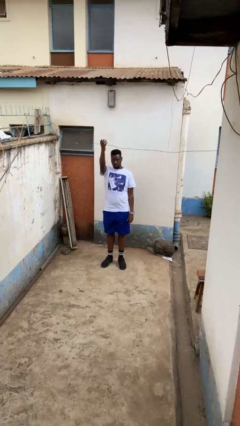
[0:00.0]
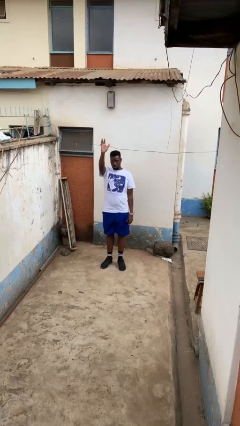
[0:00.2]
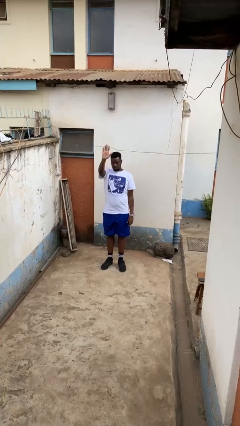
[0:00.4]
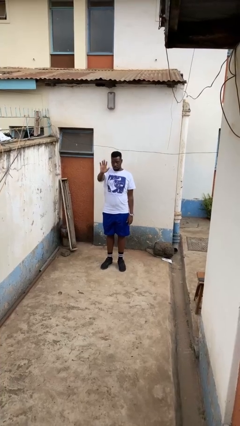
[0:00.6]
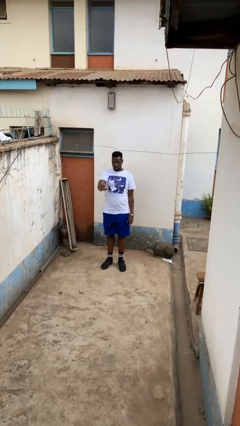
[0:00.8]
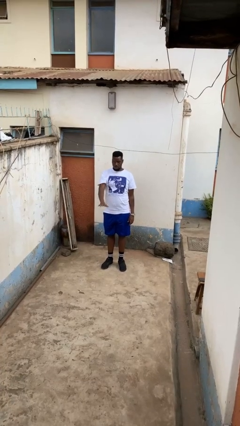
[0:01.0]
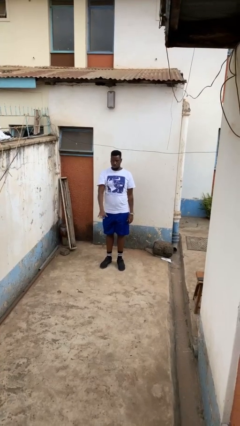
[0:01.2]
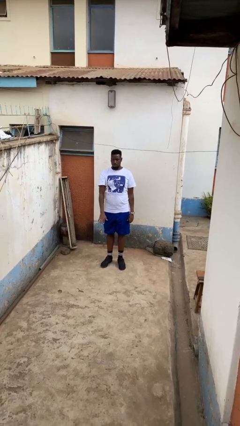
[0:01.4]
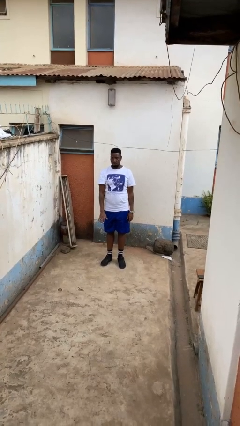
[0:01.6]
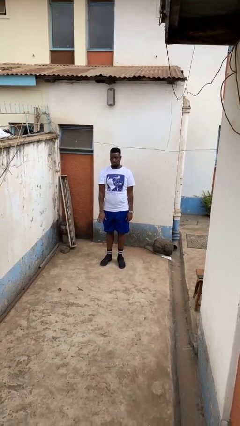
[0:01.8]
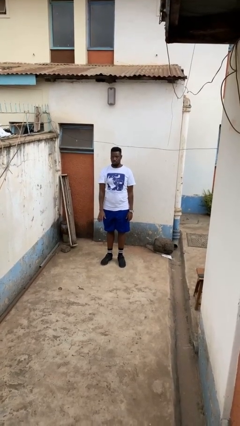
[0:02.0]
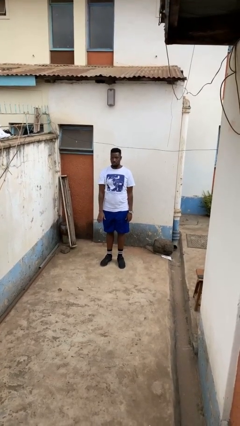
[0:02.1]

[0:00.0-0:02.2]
person gestures swipe down

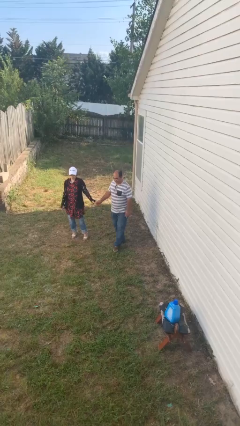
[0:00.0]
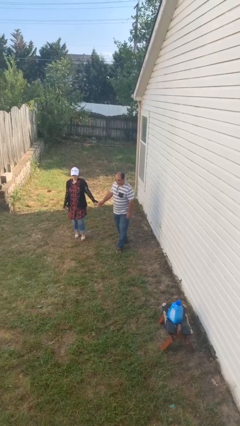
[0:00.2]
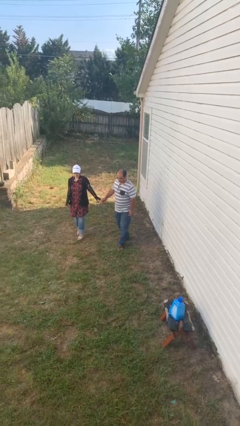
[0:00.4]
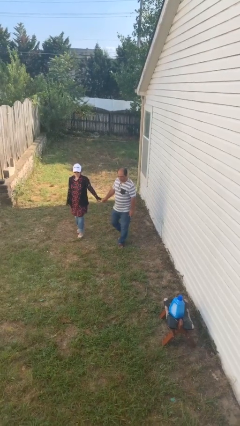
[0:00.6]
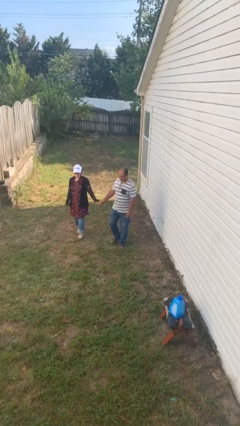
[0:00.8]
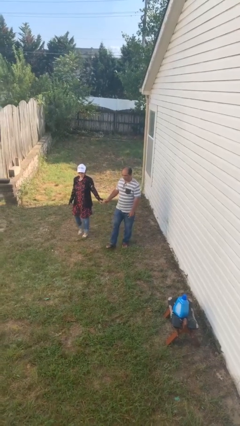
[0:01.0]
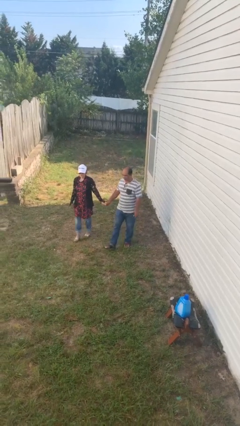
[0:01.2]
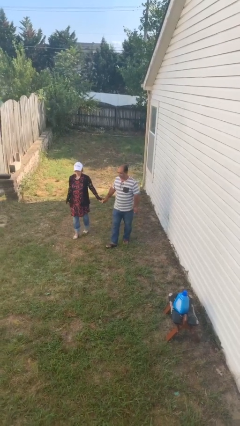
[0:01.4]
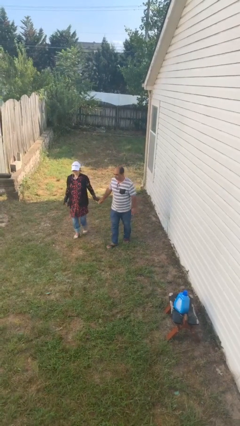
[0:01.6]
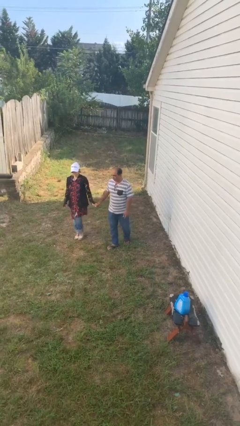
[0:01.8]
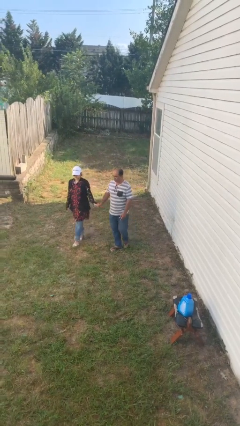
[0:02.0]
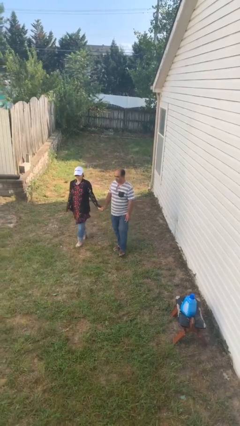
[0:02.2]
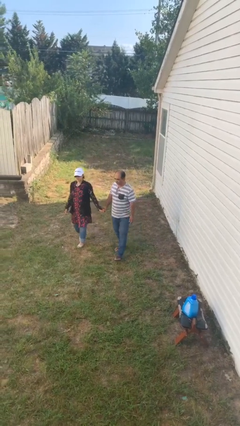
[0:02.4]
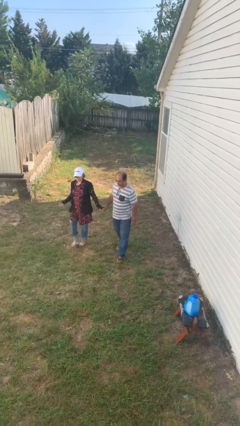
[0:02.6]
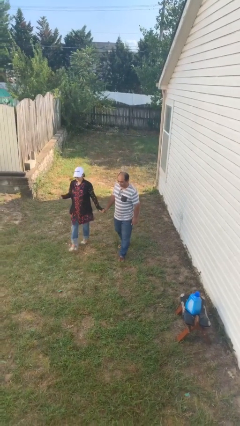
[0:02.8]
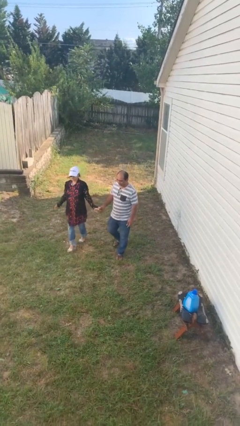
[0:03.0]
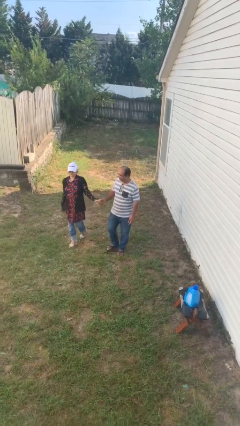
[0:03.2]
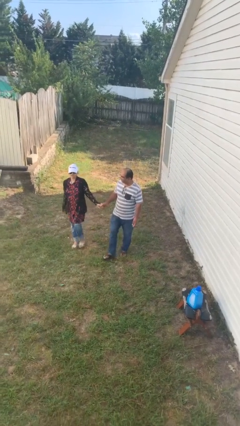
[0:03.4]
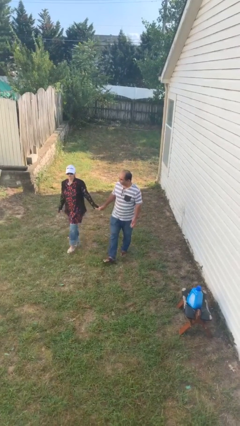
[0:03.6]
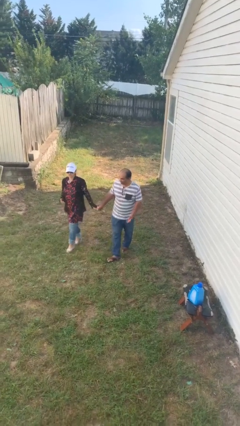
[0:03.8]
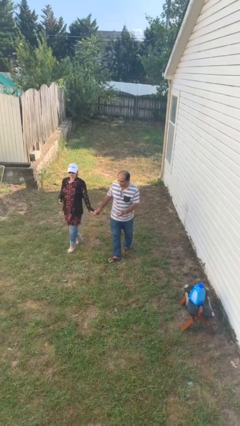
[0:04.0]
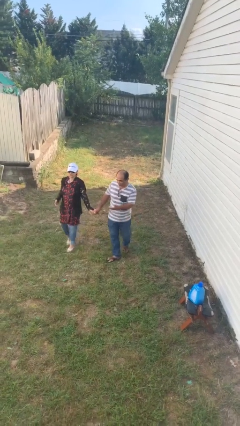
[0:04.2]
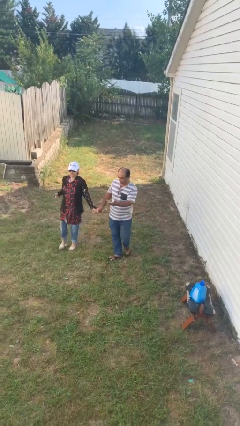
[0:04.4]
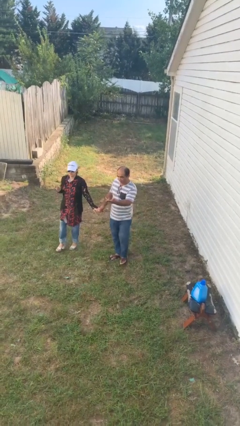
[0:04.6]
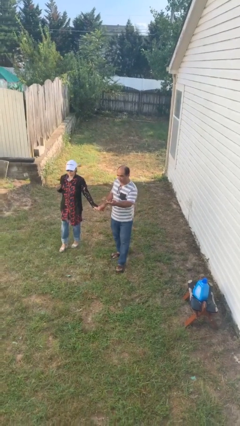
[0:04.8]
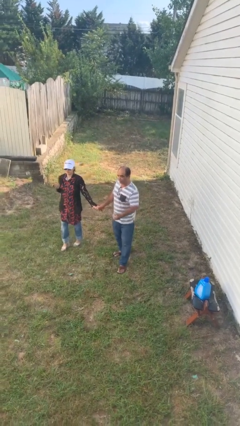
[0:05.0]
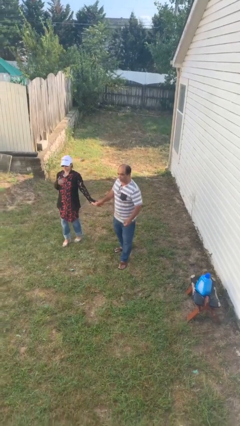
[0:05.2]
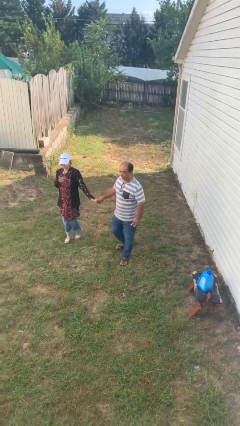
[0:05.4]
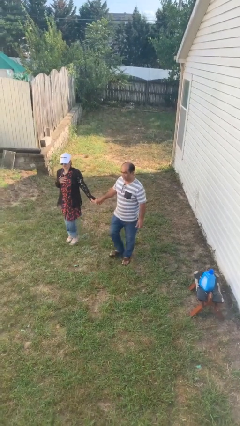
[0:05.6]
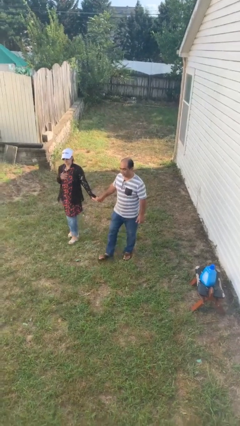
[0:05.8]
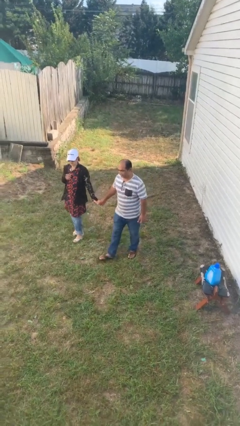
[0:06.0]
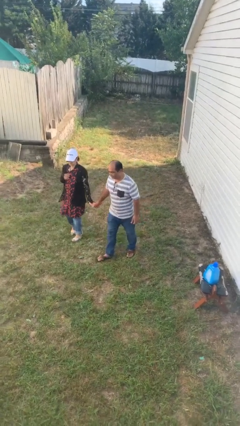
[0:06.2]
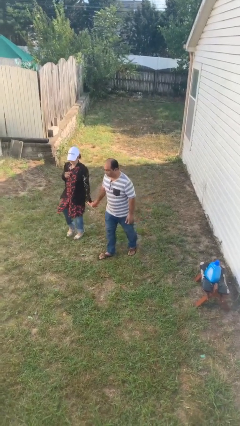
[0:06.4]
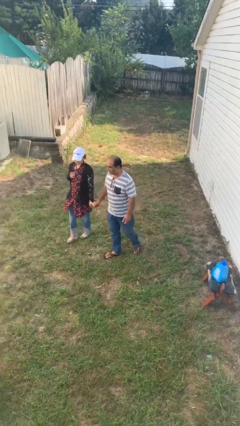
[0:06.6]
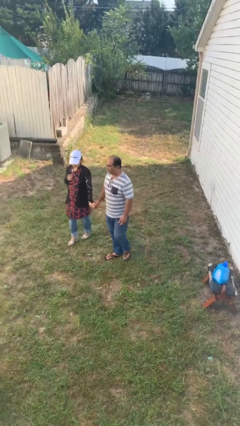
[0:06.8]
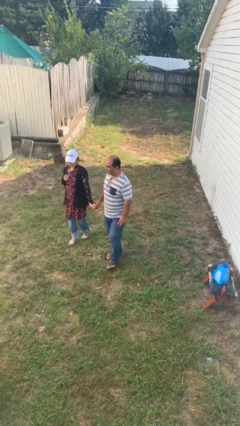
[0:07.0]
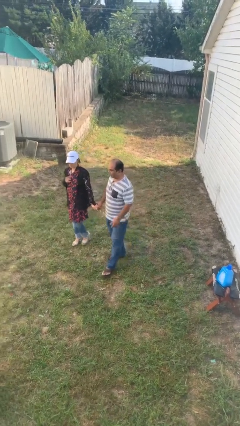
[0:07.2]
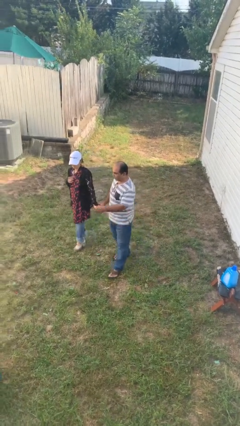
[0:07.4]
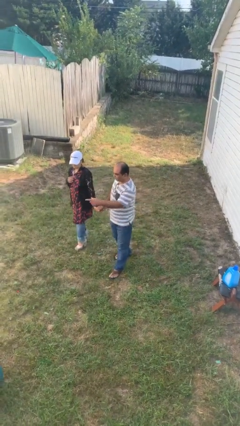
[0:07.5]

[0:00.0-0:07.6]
person holds hand

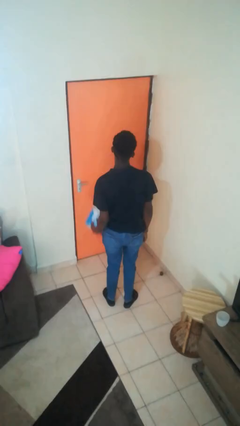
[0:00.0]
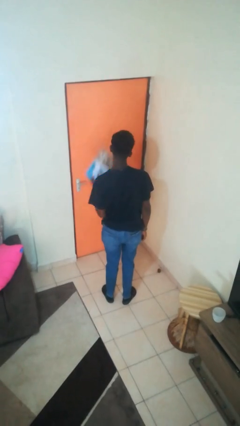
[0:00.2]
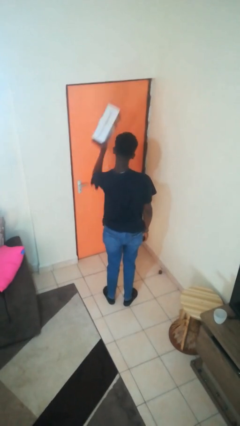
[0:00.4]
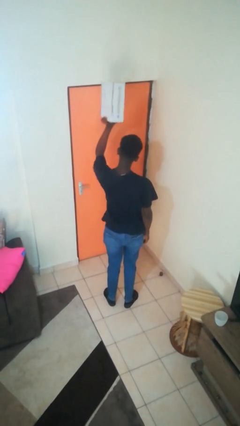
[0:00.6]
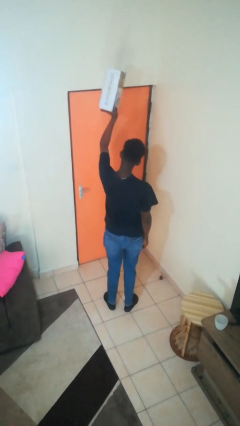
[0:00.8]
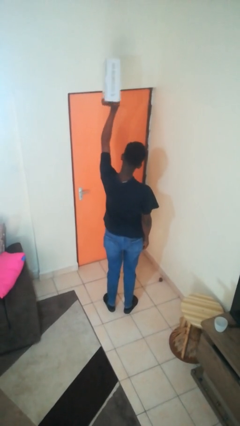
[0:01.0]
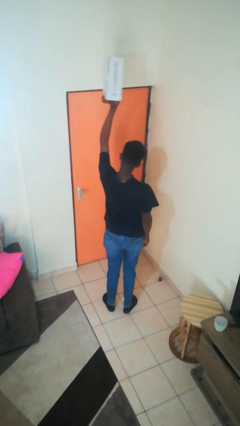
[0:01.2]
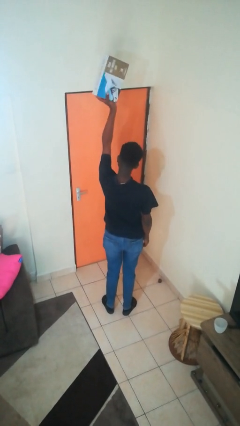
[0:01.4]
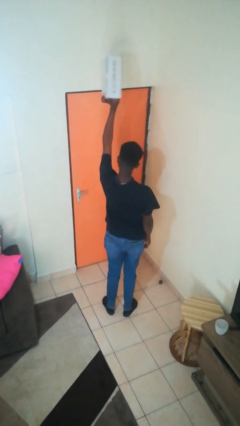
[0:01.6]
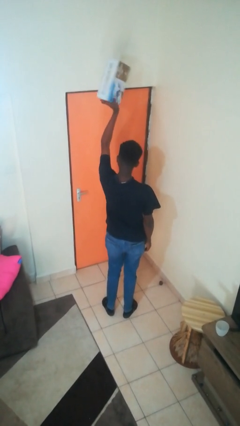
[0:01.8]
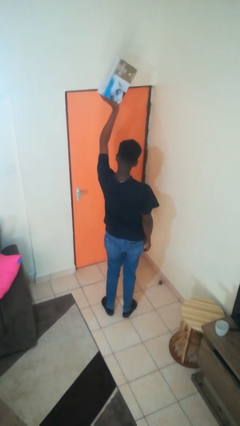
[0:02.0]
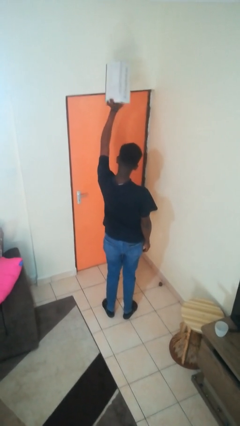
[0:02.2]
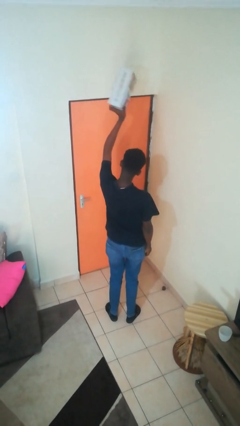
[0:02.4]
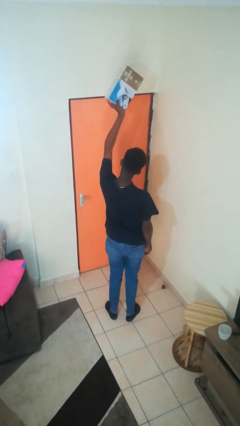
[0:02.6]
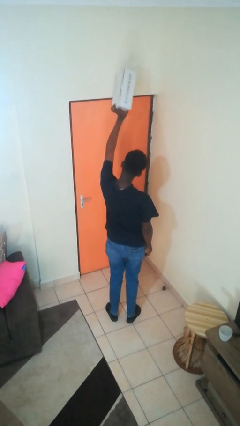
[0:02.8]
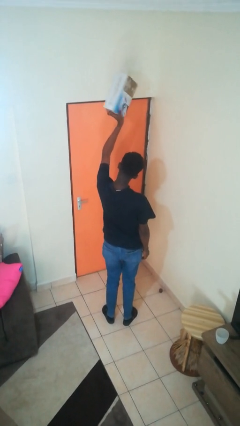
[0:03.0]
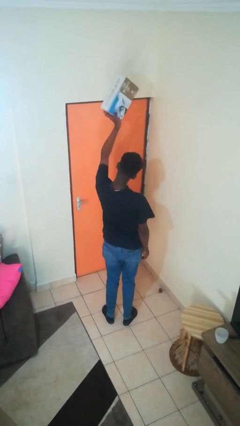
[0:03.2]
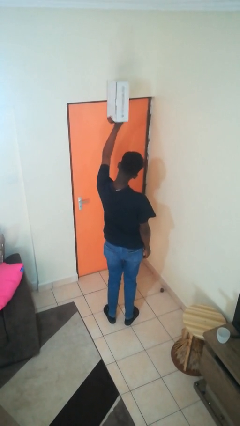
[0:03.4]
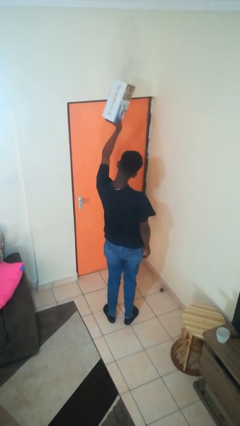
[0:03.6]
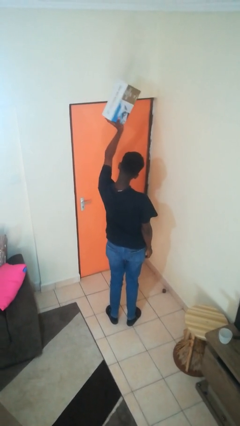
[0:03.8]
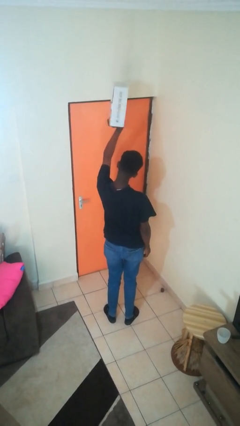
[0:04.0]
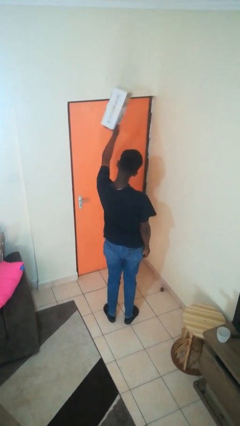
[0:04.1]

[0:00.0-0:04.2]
person holds object above head

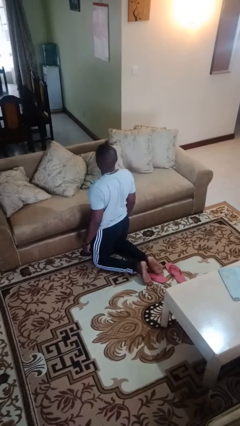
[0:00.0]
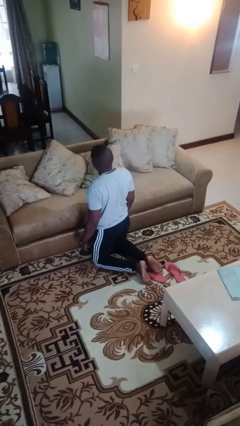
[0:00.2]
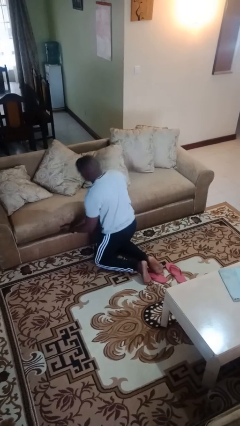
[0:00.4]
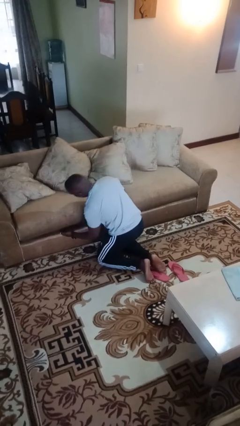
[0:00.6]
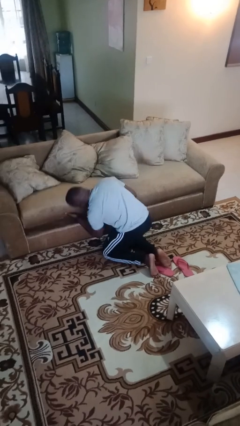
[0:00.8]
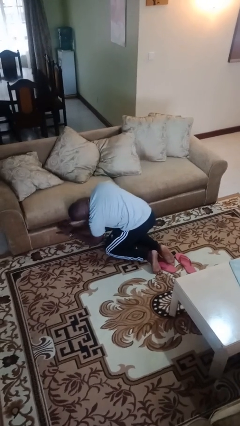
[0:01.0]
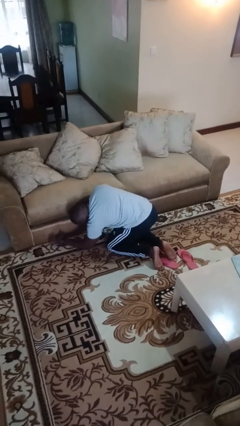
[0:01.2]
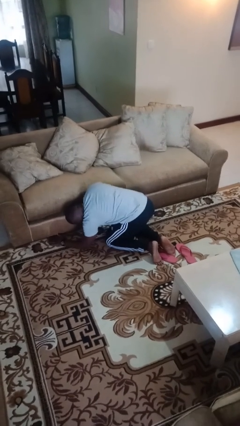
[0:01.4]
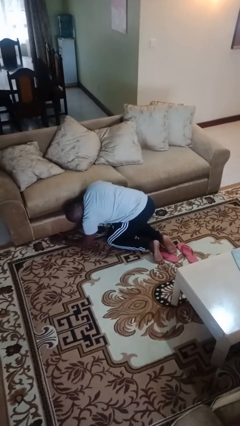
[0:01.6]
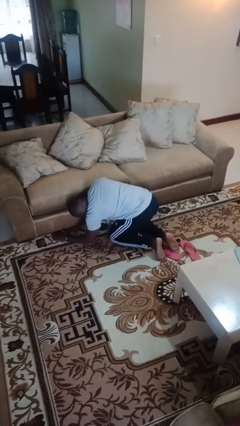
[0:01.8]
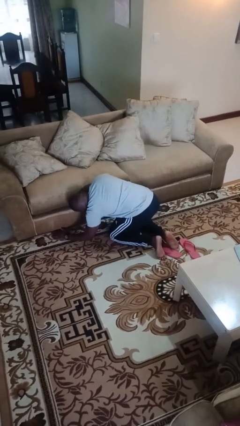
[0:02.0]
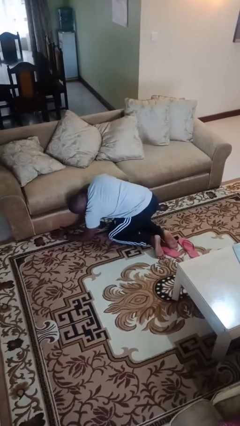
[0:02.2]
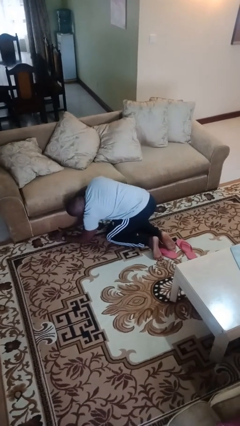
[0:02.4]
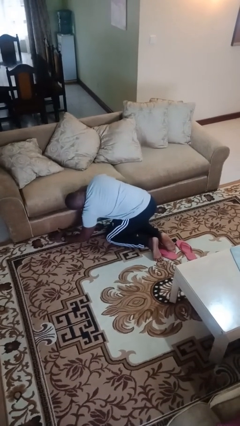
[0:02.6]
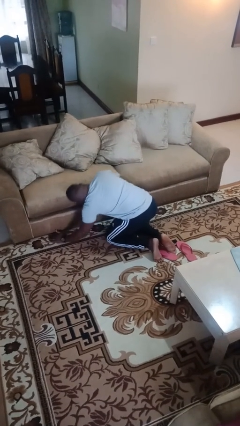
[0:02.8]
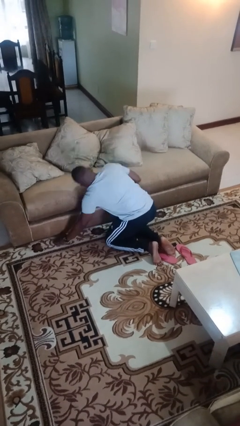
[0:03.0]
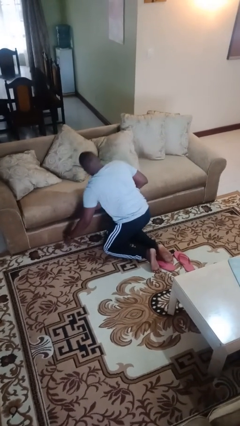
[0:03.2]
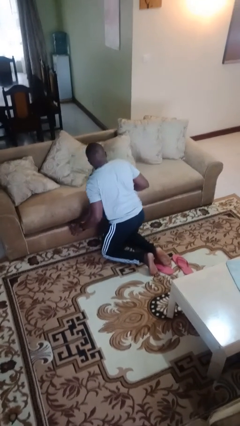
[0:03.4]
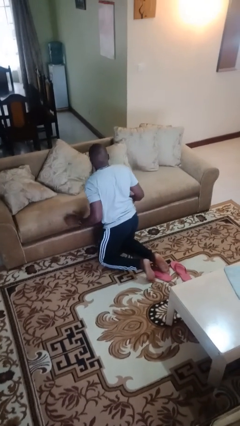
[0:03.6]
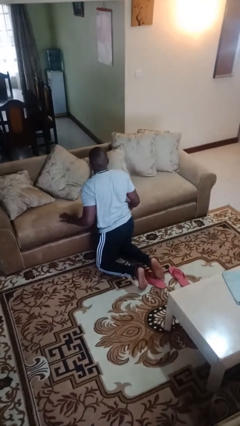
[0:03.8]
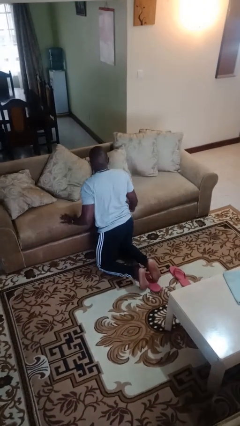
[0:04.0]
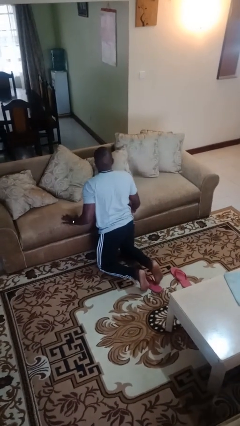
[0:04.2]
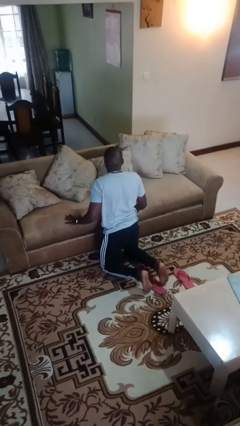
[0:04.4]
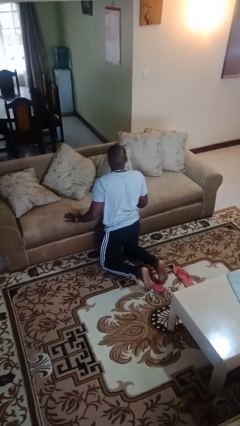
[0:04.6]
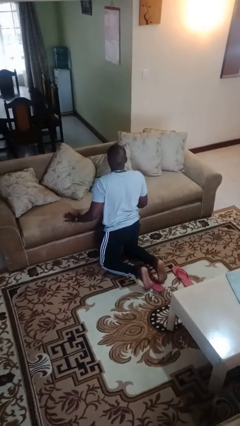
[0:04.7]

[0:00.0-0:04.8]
person searches under couch
